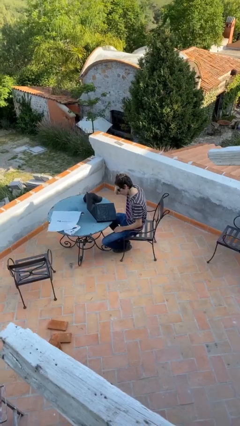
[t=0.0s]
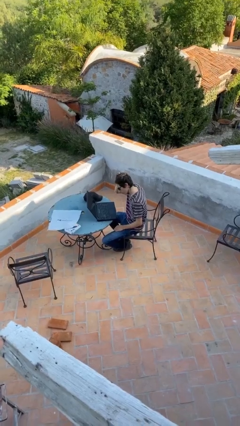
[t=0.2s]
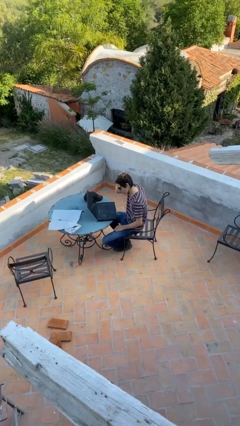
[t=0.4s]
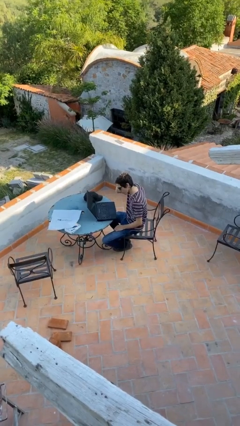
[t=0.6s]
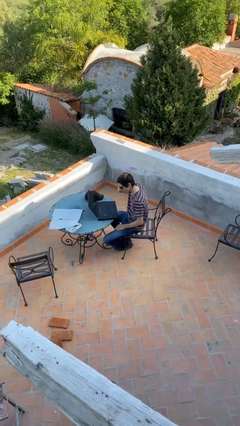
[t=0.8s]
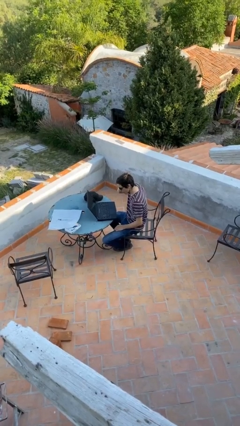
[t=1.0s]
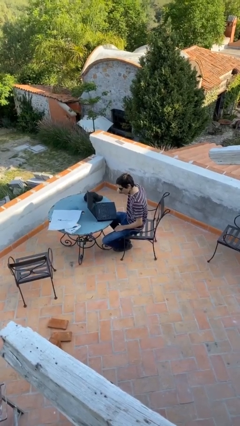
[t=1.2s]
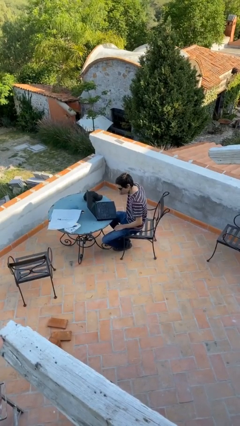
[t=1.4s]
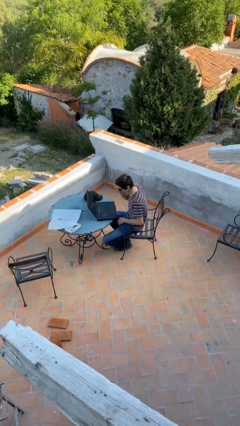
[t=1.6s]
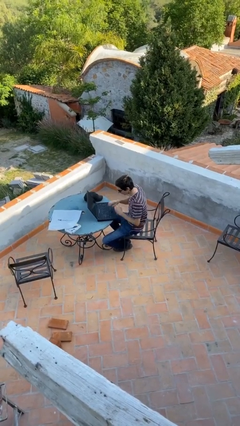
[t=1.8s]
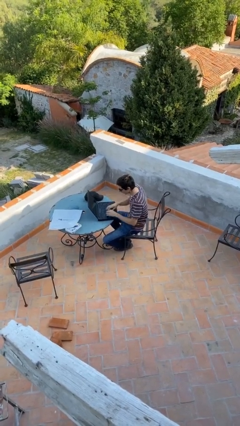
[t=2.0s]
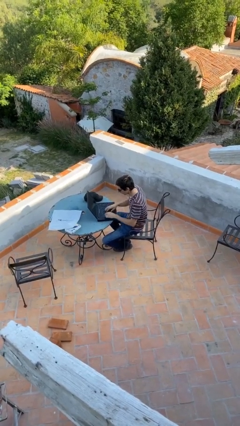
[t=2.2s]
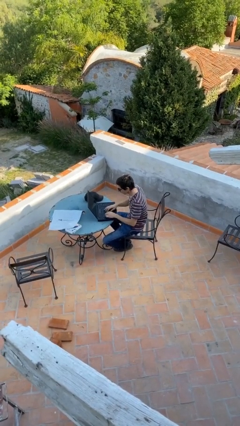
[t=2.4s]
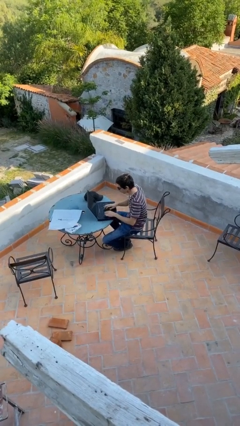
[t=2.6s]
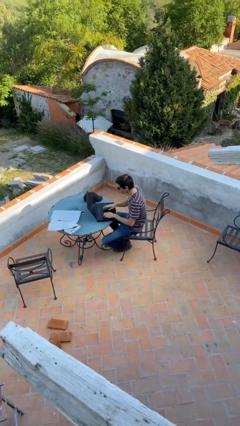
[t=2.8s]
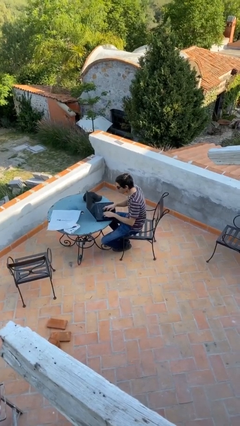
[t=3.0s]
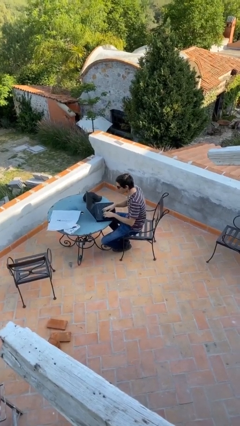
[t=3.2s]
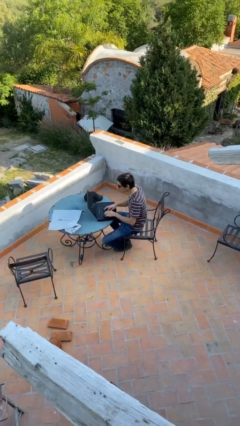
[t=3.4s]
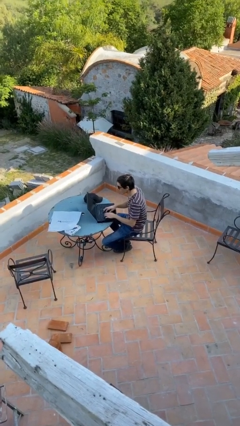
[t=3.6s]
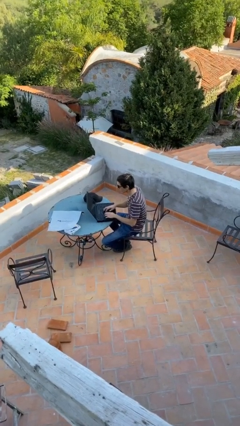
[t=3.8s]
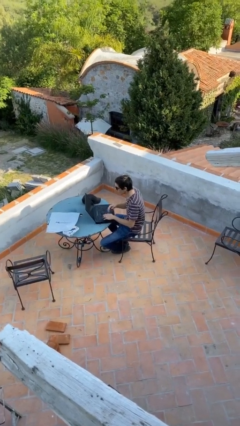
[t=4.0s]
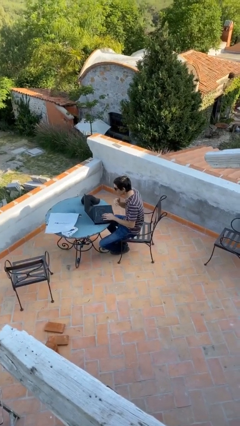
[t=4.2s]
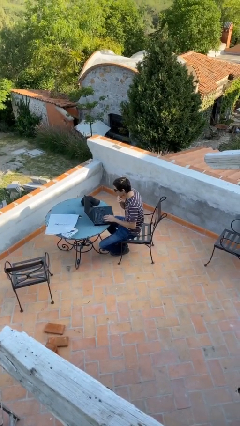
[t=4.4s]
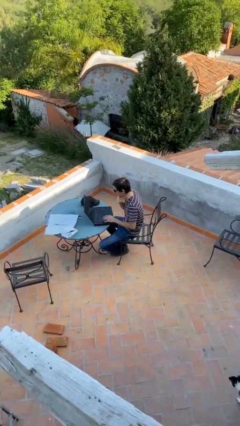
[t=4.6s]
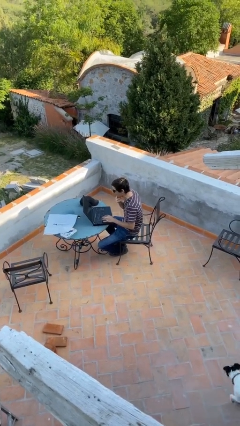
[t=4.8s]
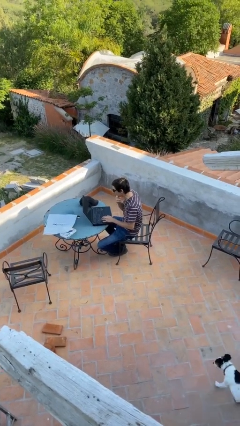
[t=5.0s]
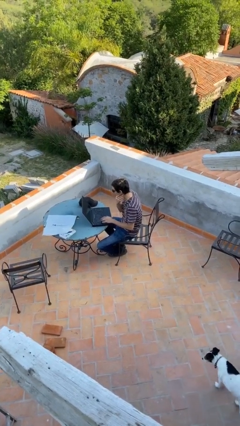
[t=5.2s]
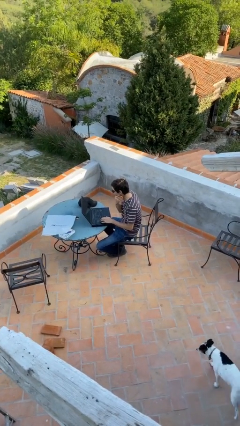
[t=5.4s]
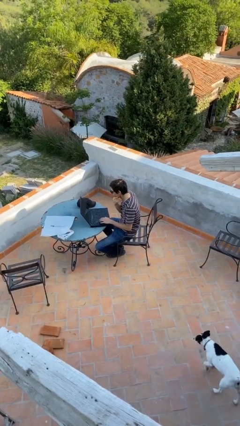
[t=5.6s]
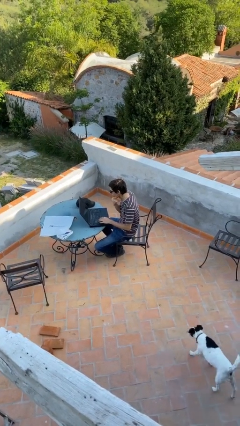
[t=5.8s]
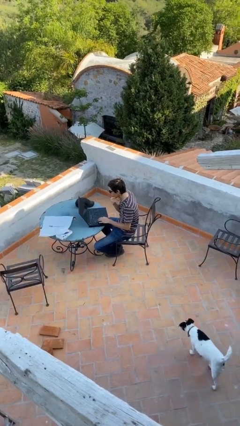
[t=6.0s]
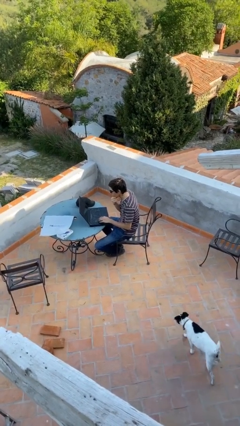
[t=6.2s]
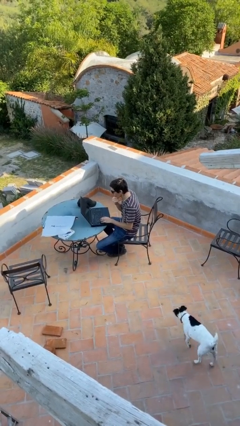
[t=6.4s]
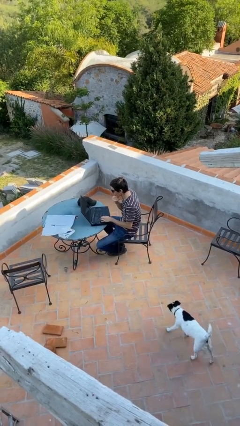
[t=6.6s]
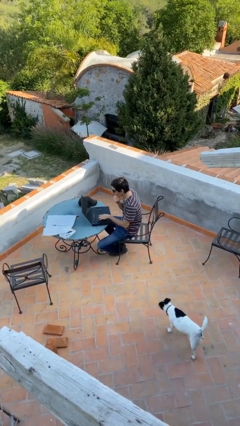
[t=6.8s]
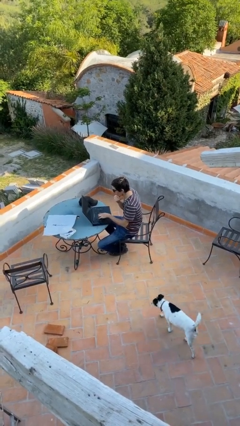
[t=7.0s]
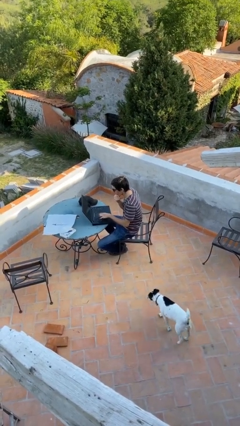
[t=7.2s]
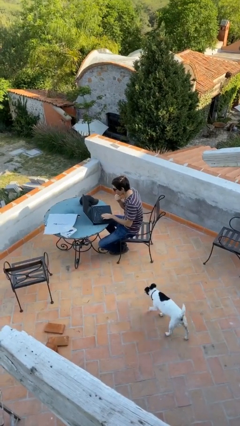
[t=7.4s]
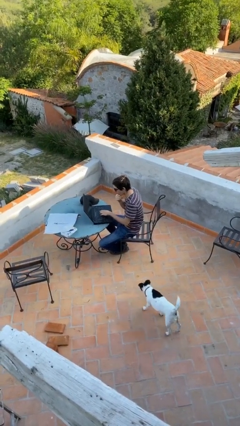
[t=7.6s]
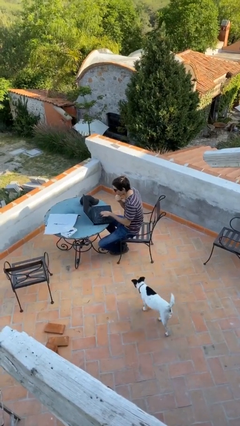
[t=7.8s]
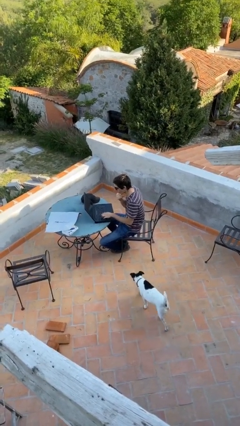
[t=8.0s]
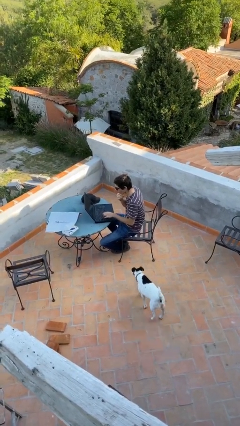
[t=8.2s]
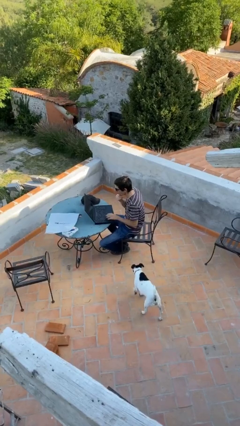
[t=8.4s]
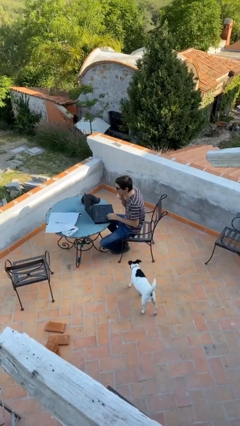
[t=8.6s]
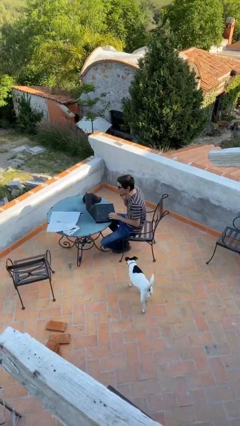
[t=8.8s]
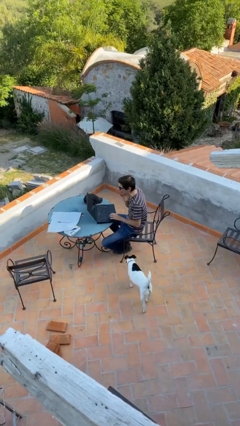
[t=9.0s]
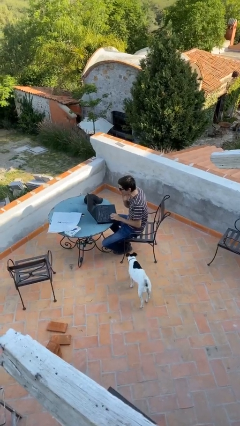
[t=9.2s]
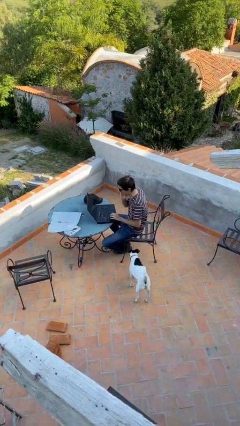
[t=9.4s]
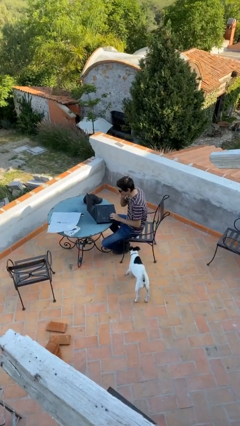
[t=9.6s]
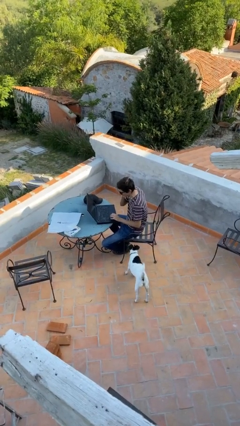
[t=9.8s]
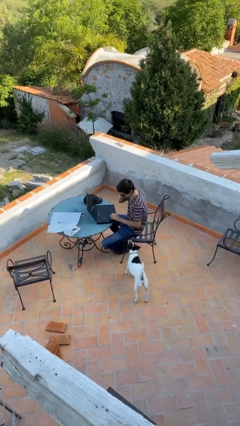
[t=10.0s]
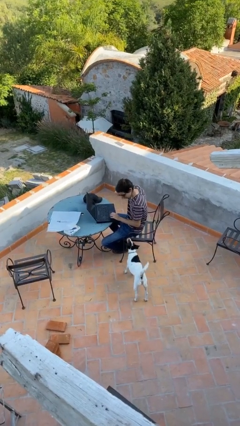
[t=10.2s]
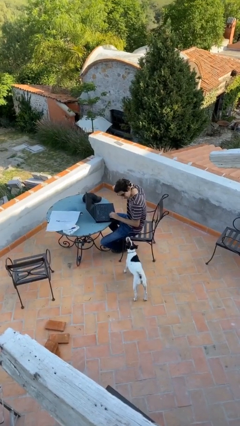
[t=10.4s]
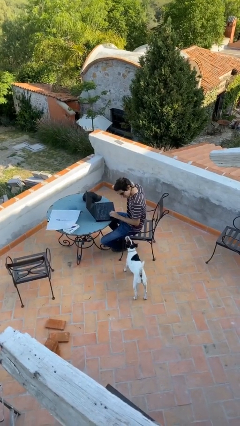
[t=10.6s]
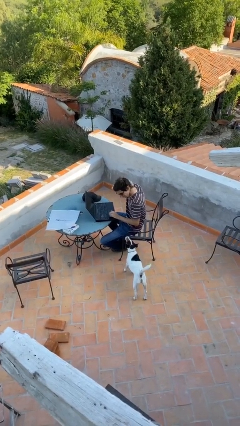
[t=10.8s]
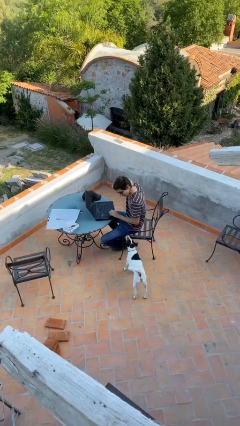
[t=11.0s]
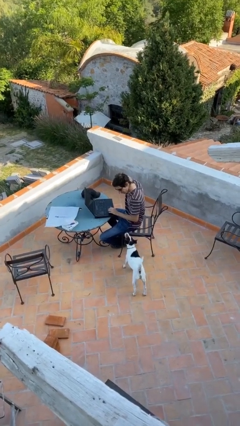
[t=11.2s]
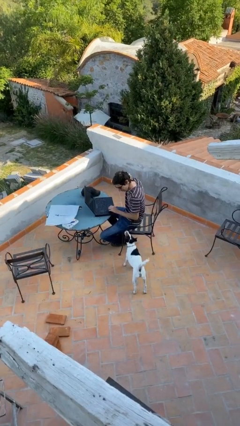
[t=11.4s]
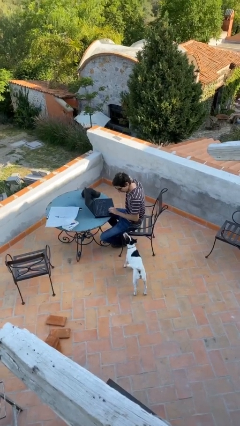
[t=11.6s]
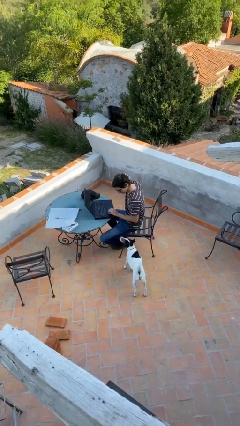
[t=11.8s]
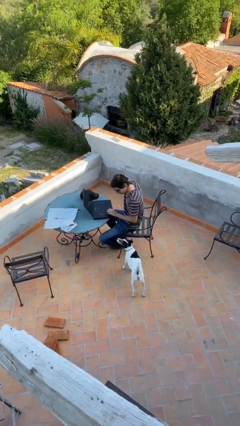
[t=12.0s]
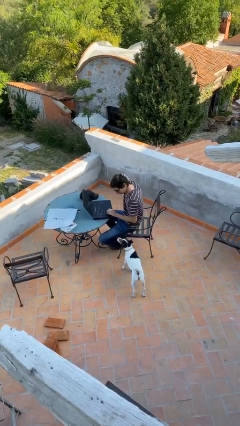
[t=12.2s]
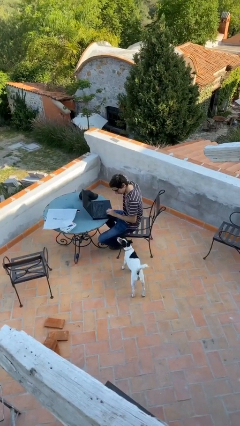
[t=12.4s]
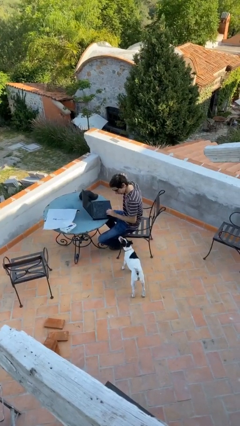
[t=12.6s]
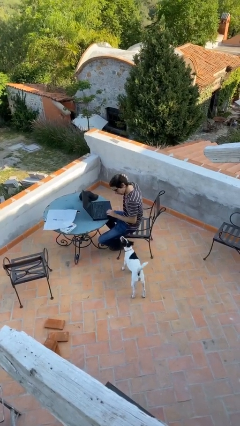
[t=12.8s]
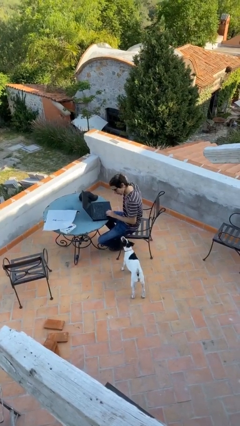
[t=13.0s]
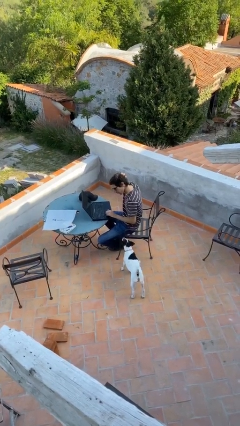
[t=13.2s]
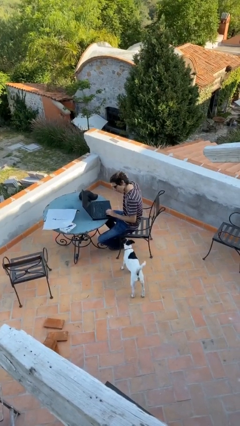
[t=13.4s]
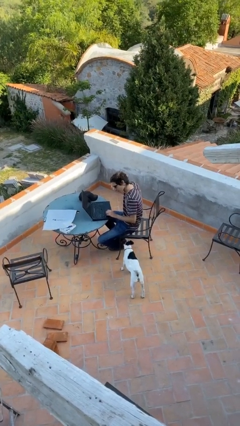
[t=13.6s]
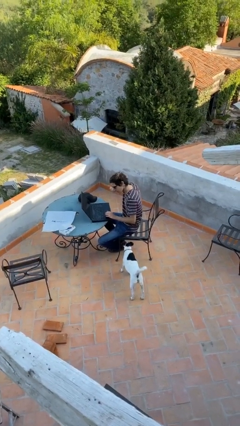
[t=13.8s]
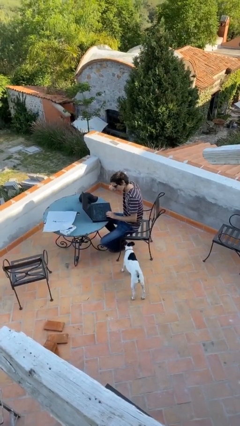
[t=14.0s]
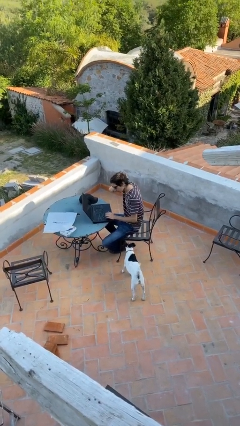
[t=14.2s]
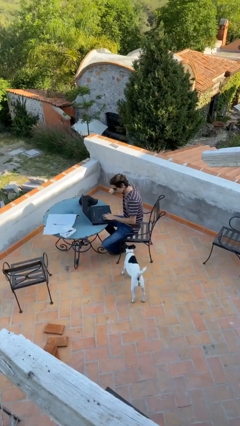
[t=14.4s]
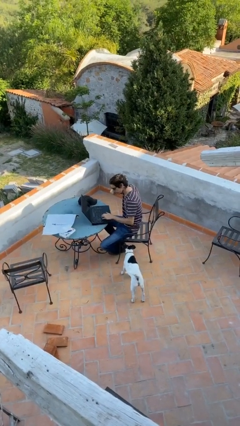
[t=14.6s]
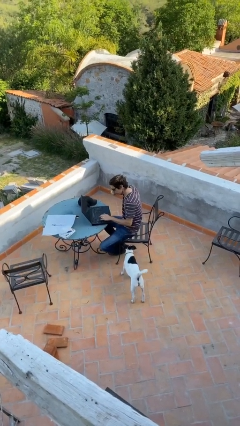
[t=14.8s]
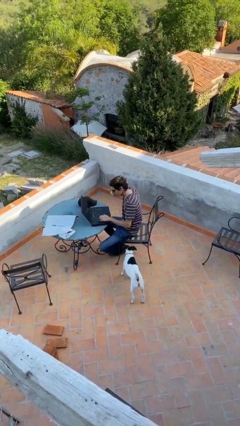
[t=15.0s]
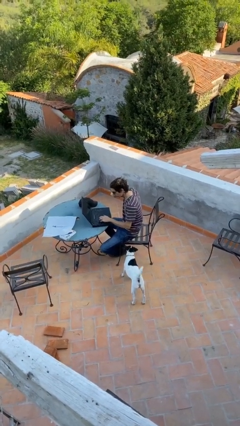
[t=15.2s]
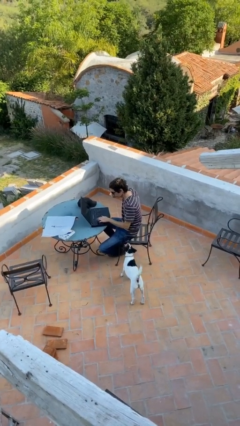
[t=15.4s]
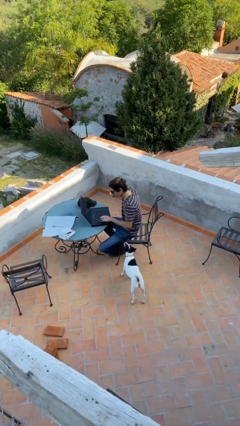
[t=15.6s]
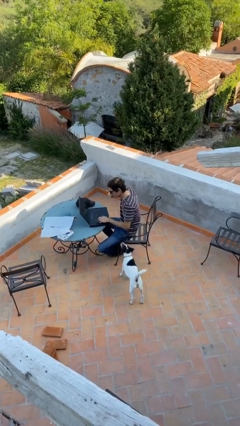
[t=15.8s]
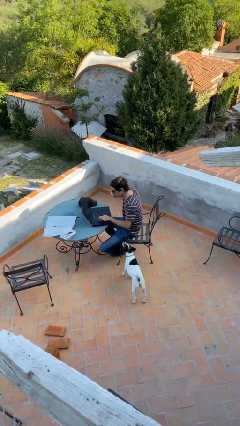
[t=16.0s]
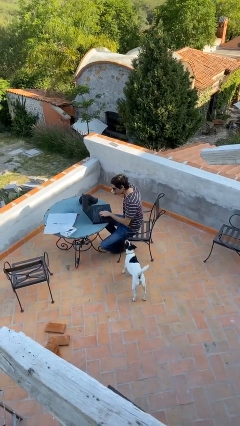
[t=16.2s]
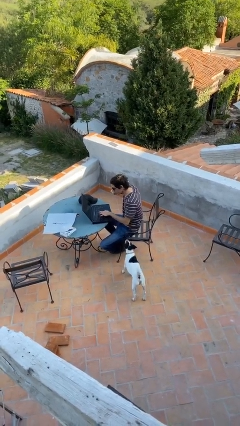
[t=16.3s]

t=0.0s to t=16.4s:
person interacts with laptop

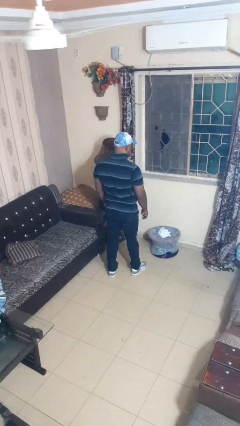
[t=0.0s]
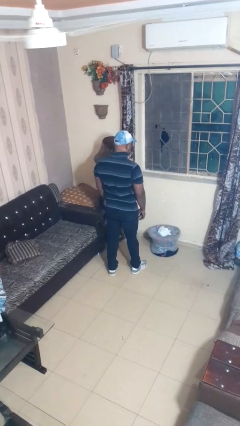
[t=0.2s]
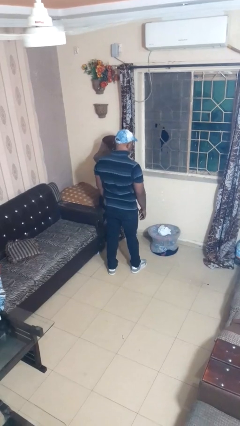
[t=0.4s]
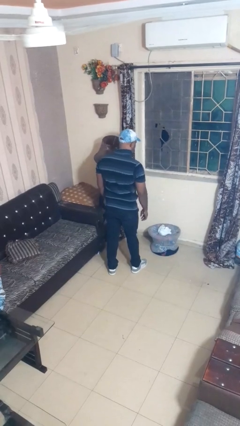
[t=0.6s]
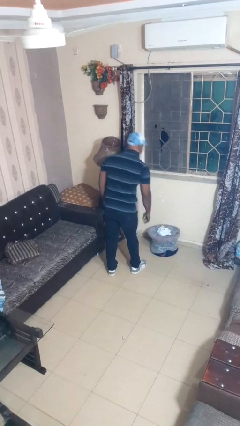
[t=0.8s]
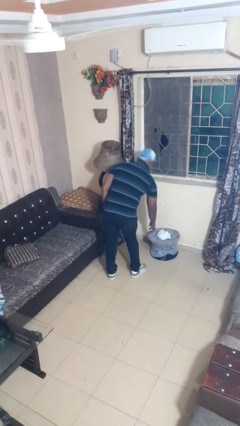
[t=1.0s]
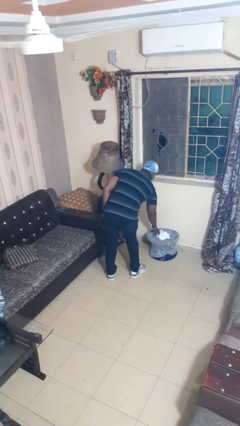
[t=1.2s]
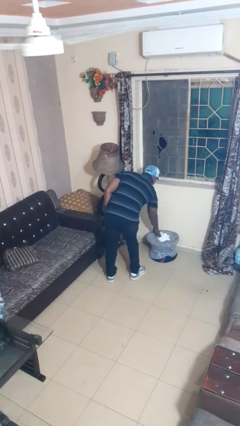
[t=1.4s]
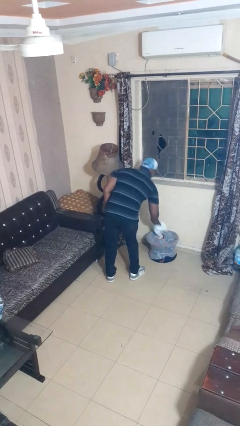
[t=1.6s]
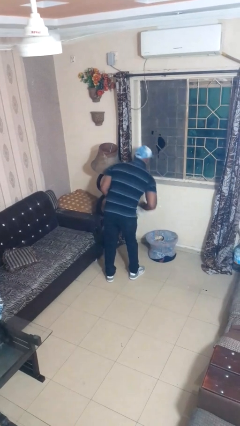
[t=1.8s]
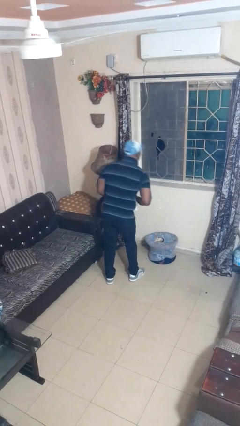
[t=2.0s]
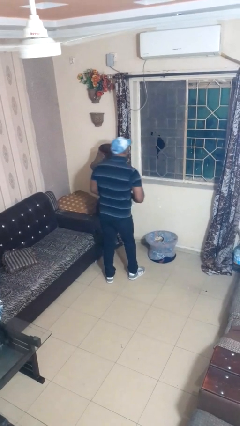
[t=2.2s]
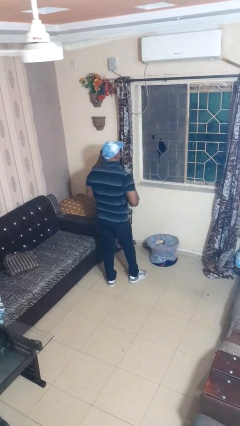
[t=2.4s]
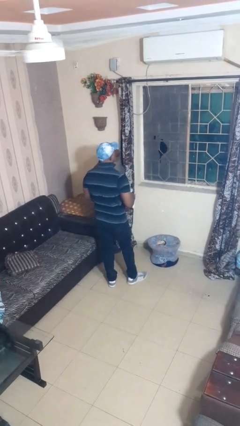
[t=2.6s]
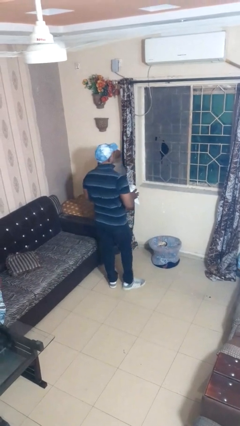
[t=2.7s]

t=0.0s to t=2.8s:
person takes object from basket
